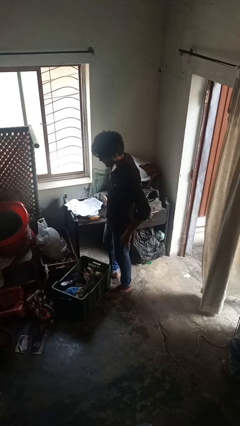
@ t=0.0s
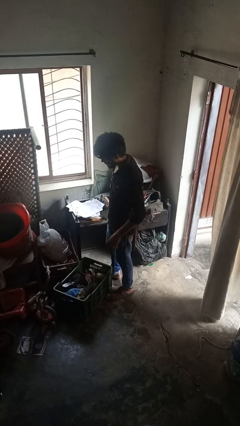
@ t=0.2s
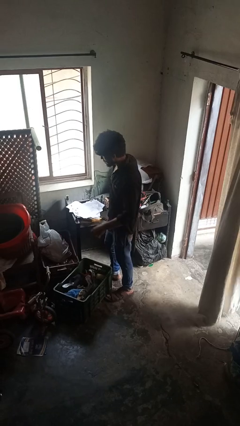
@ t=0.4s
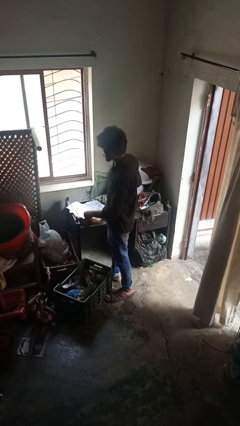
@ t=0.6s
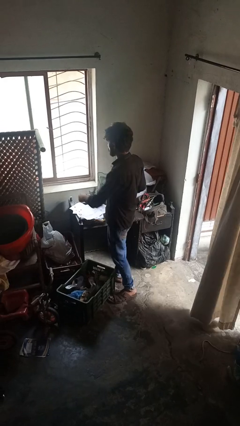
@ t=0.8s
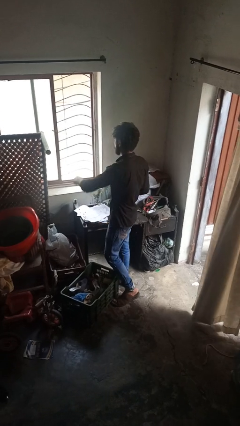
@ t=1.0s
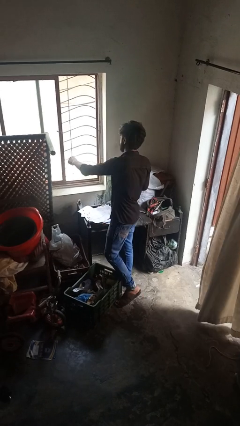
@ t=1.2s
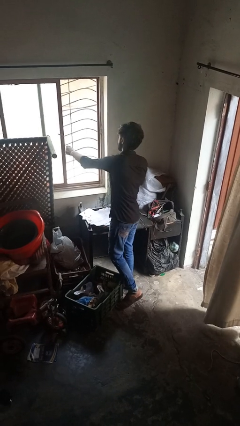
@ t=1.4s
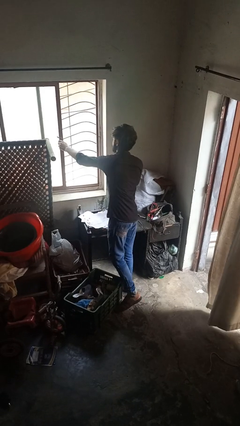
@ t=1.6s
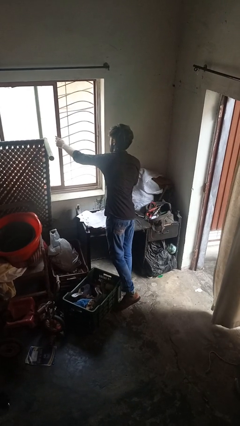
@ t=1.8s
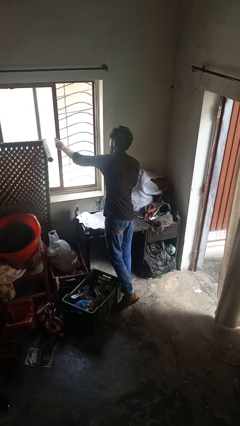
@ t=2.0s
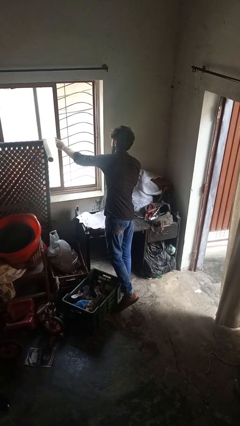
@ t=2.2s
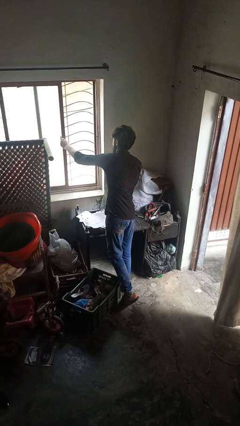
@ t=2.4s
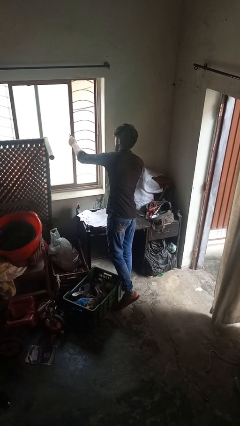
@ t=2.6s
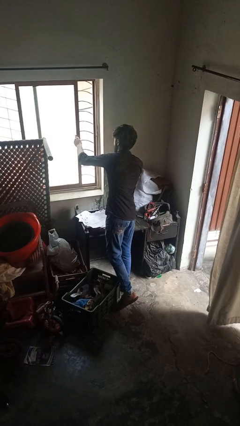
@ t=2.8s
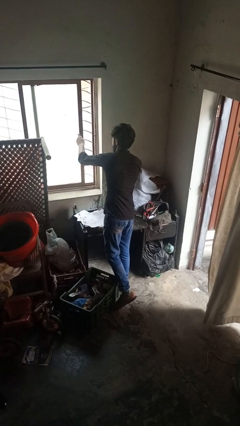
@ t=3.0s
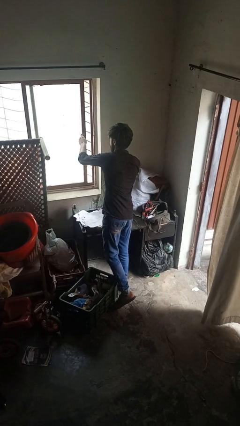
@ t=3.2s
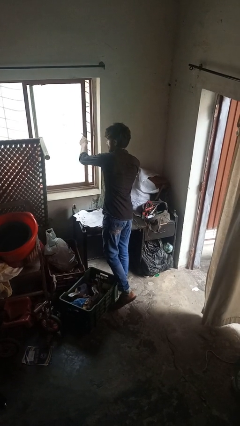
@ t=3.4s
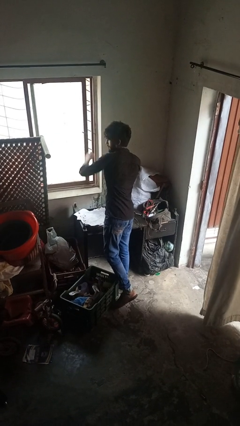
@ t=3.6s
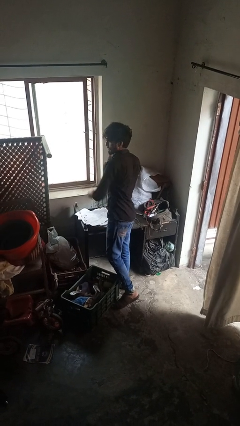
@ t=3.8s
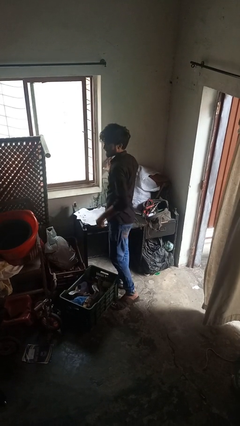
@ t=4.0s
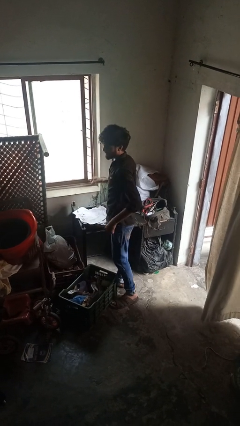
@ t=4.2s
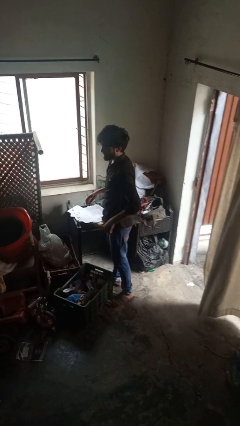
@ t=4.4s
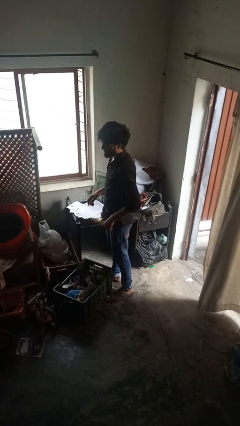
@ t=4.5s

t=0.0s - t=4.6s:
person closes home window

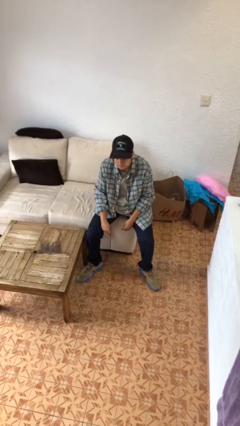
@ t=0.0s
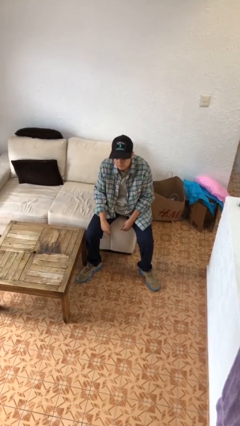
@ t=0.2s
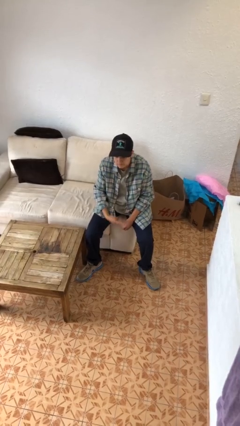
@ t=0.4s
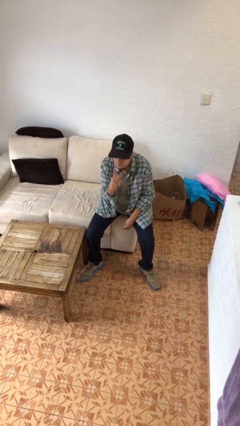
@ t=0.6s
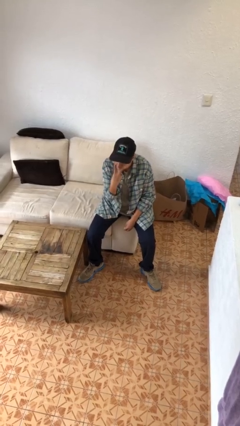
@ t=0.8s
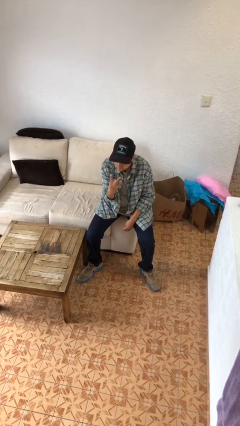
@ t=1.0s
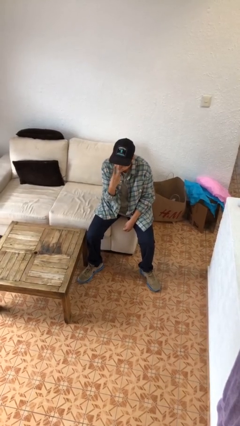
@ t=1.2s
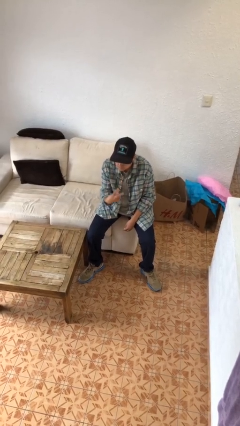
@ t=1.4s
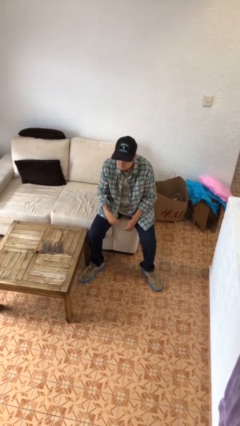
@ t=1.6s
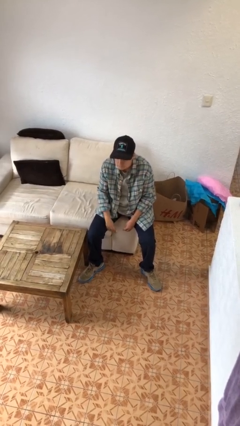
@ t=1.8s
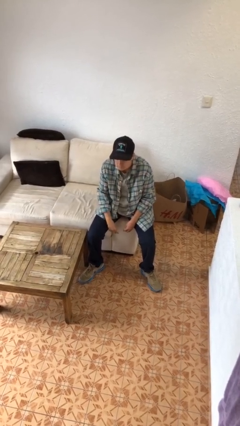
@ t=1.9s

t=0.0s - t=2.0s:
person gestures watch closely

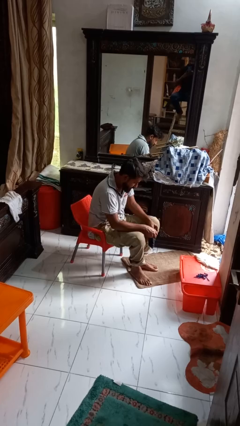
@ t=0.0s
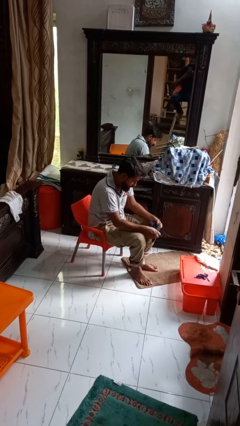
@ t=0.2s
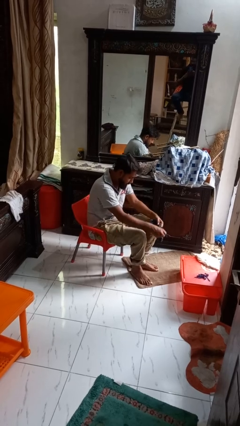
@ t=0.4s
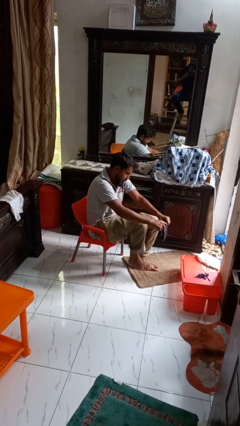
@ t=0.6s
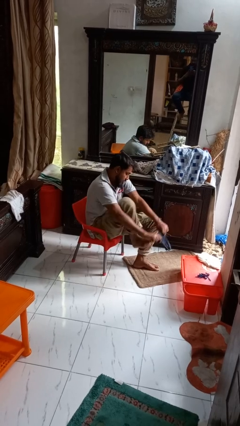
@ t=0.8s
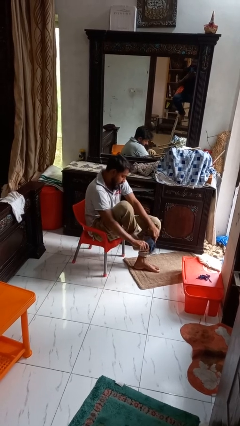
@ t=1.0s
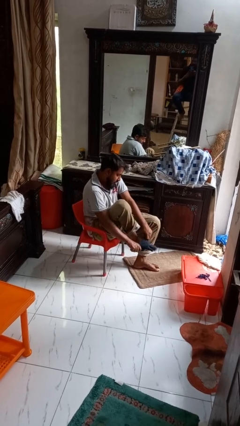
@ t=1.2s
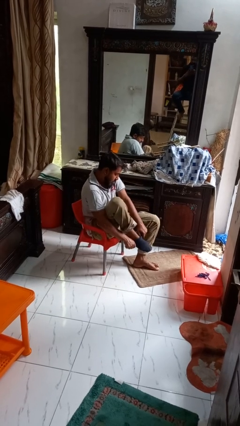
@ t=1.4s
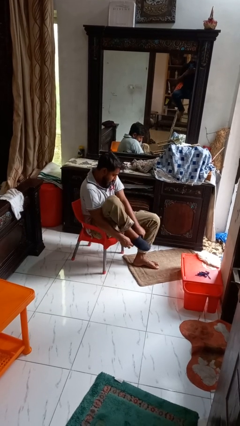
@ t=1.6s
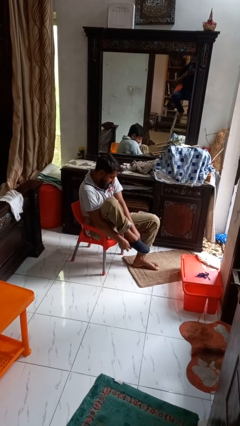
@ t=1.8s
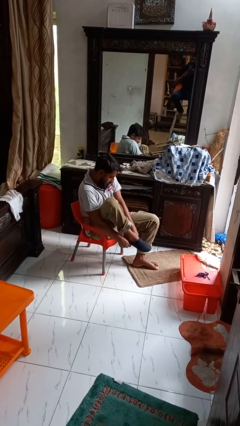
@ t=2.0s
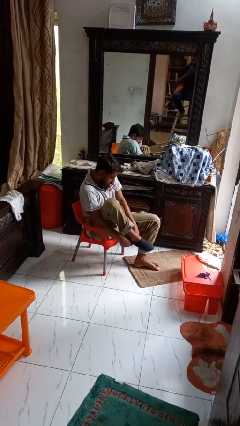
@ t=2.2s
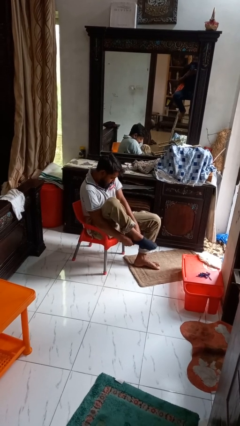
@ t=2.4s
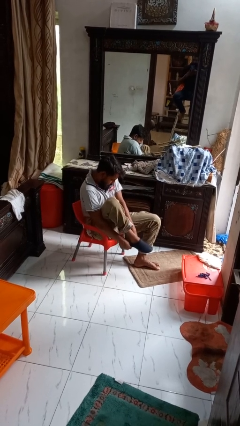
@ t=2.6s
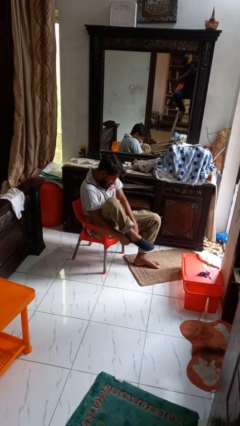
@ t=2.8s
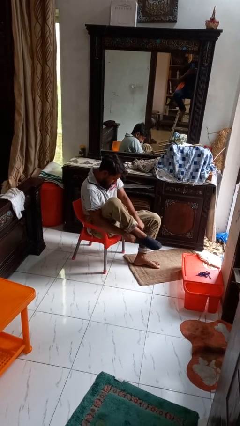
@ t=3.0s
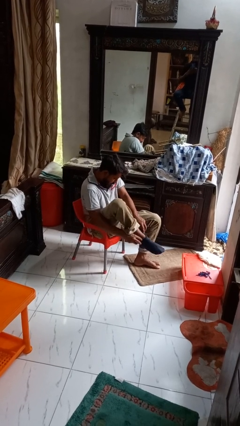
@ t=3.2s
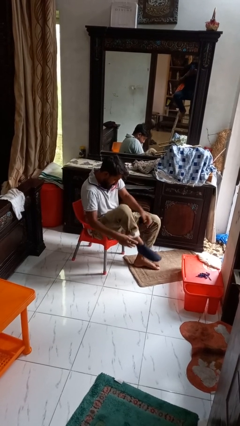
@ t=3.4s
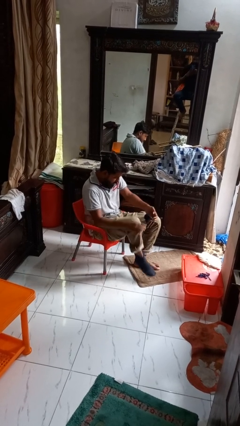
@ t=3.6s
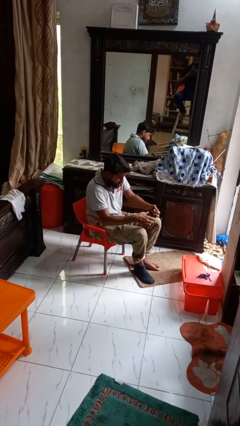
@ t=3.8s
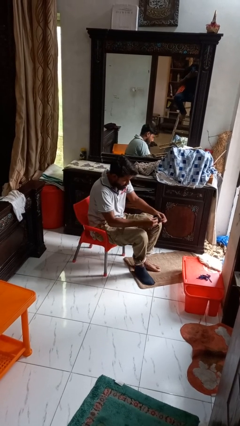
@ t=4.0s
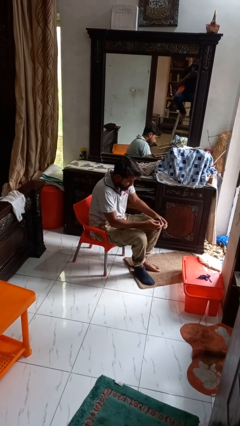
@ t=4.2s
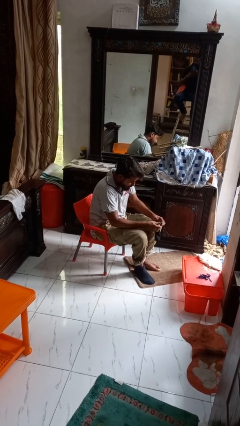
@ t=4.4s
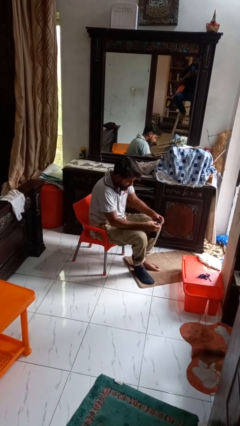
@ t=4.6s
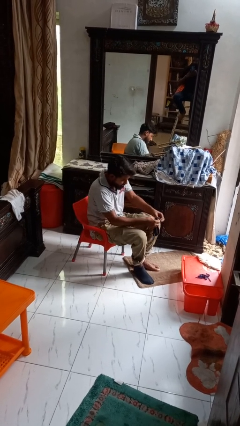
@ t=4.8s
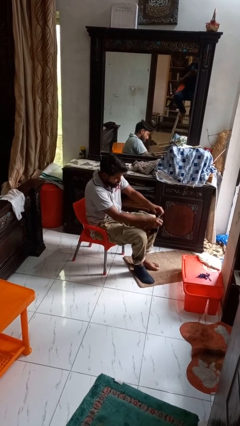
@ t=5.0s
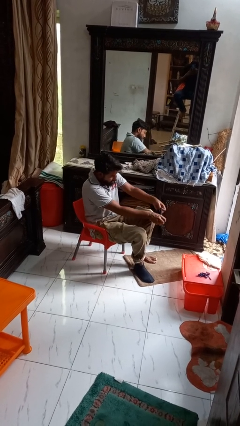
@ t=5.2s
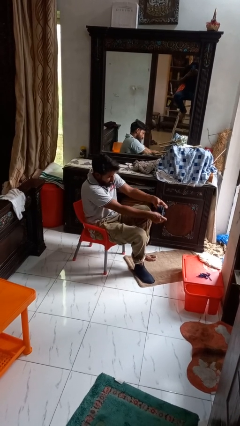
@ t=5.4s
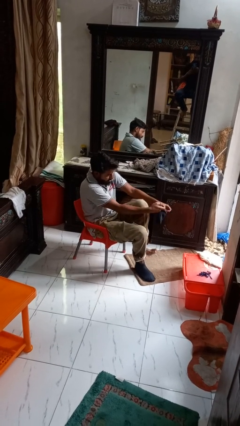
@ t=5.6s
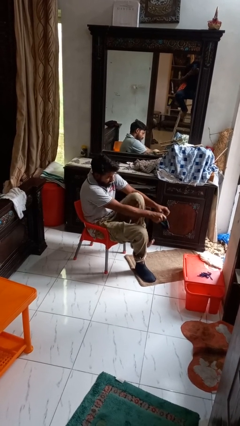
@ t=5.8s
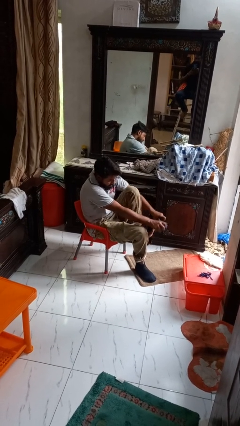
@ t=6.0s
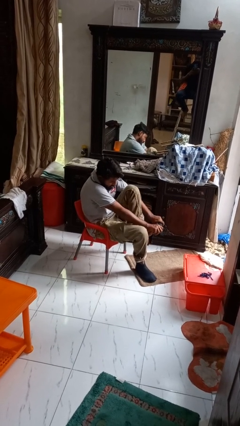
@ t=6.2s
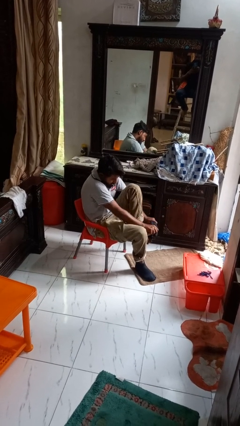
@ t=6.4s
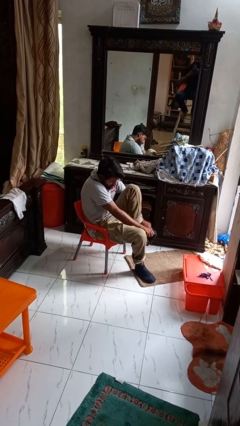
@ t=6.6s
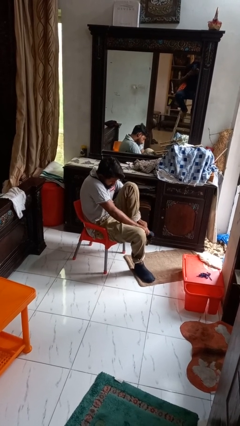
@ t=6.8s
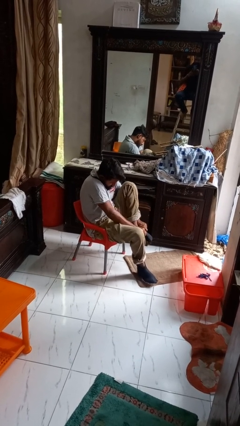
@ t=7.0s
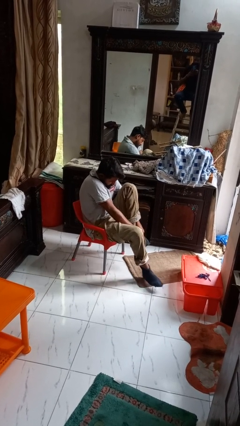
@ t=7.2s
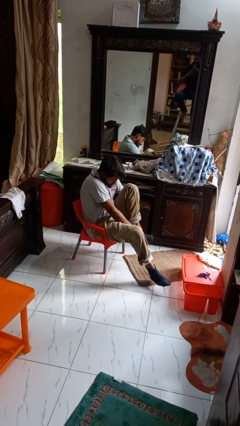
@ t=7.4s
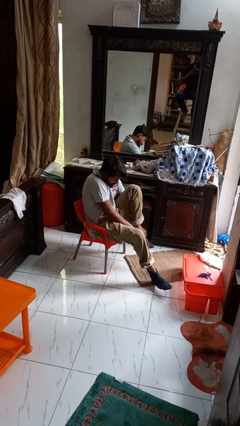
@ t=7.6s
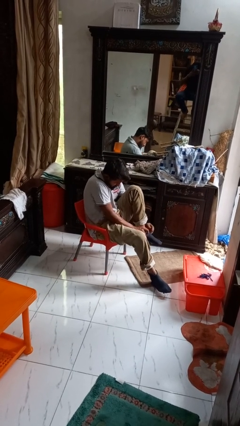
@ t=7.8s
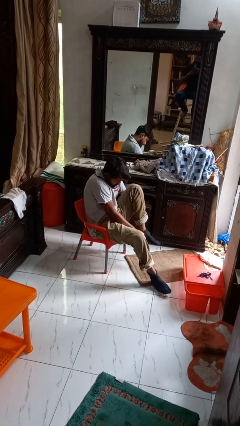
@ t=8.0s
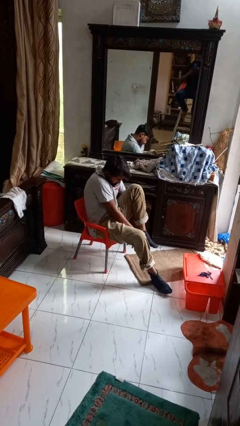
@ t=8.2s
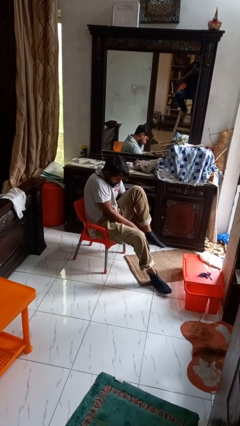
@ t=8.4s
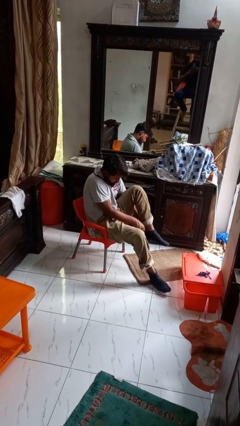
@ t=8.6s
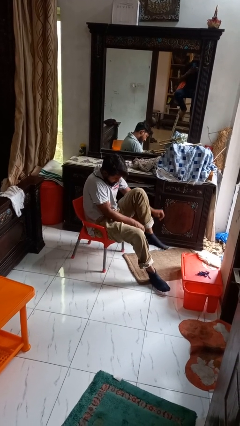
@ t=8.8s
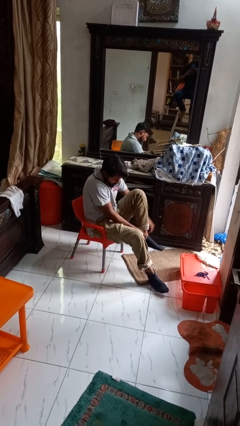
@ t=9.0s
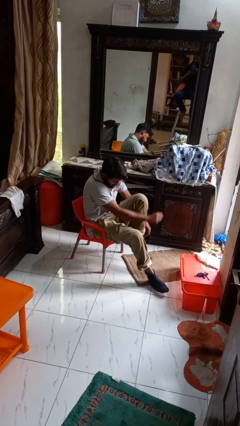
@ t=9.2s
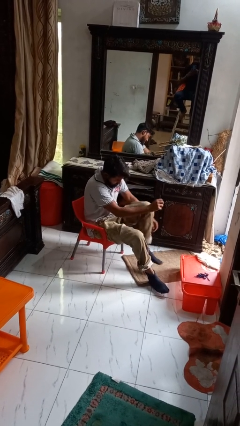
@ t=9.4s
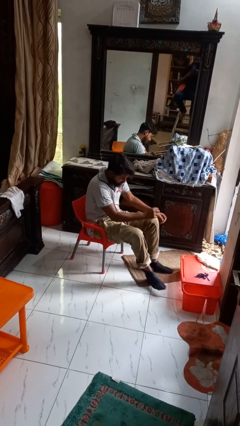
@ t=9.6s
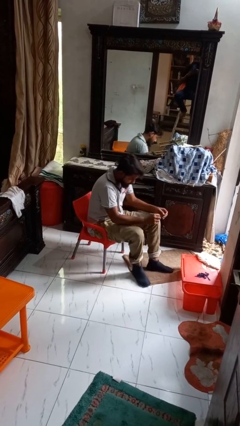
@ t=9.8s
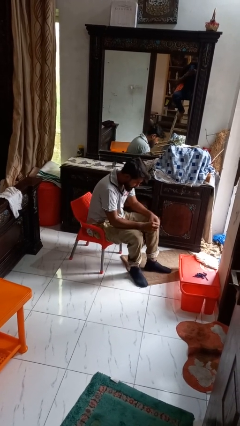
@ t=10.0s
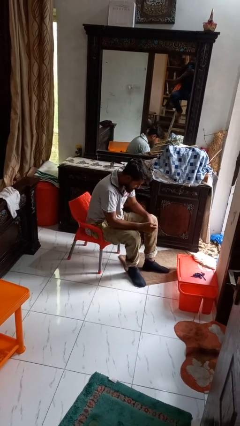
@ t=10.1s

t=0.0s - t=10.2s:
person puts on socks

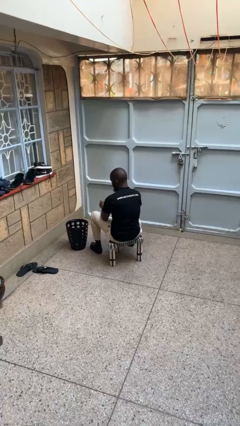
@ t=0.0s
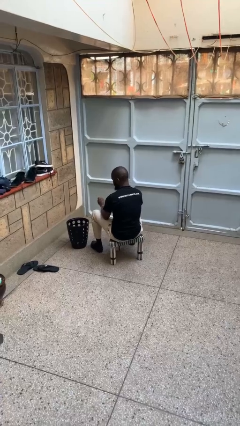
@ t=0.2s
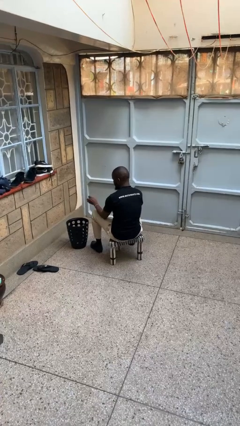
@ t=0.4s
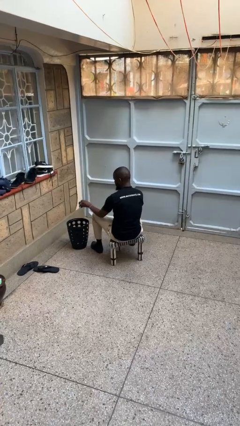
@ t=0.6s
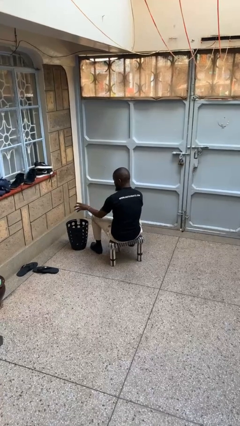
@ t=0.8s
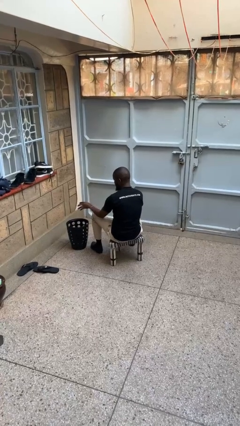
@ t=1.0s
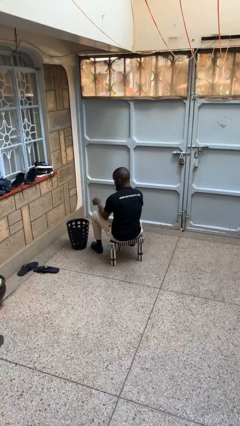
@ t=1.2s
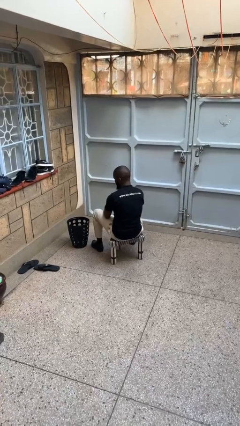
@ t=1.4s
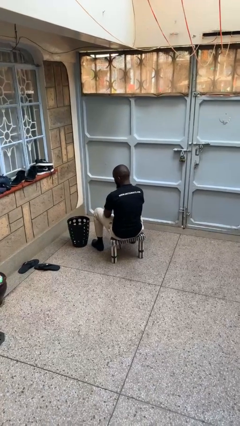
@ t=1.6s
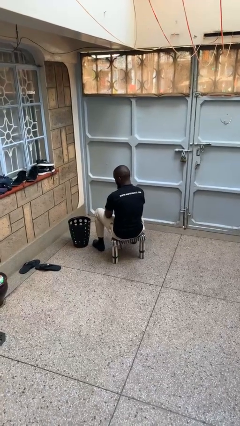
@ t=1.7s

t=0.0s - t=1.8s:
person discards trash
